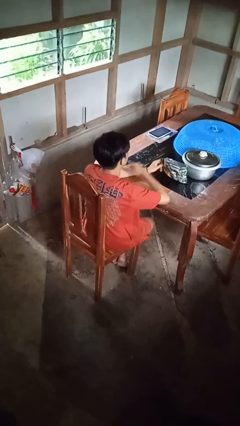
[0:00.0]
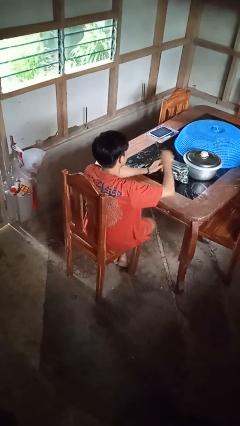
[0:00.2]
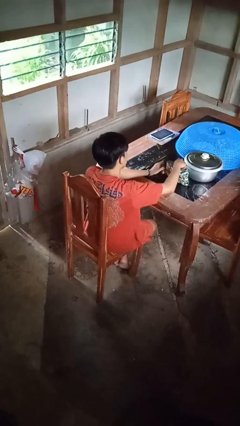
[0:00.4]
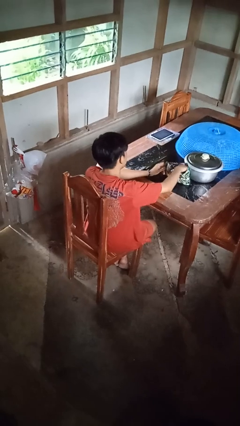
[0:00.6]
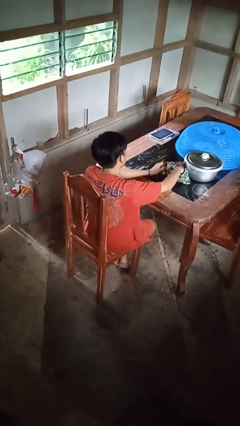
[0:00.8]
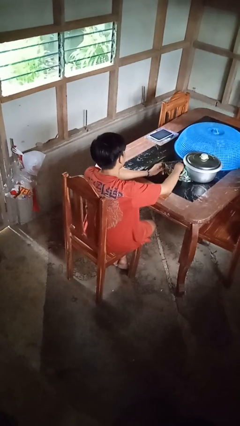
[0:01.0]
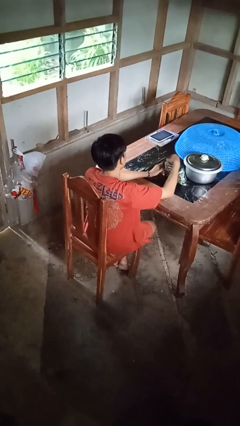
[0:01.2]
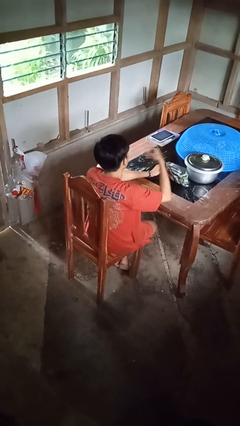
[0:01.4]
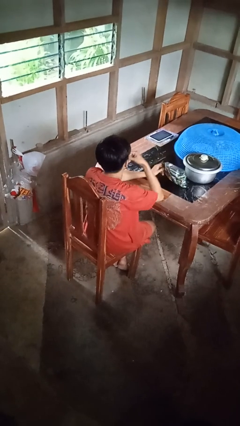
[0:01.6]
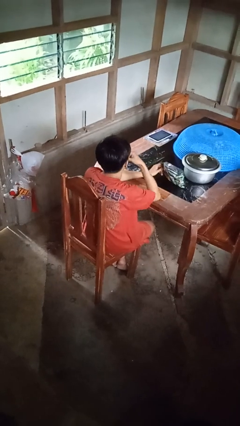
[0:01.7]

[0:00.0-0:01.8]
person eats snack from bag

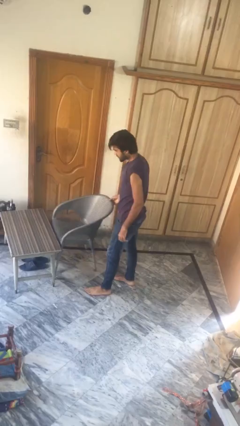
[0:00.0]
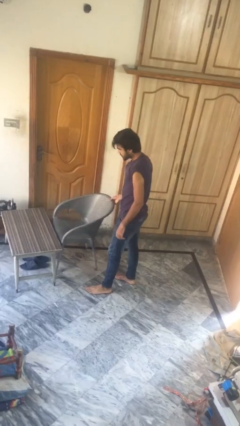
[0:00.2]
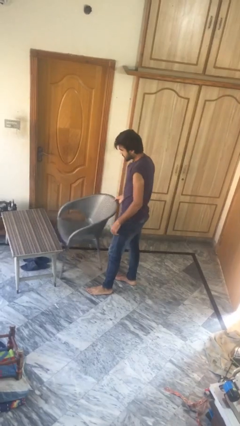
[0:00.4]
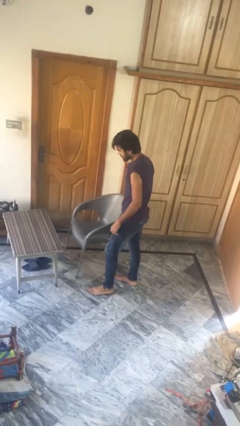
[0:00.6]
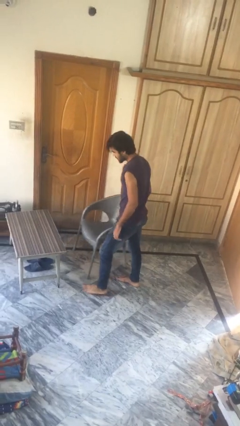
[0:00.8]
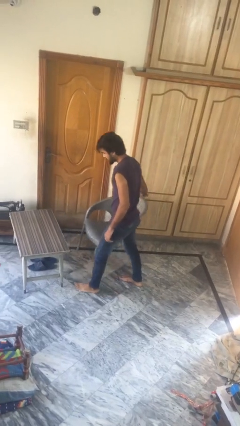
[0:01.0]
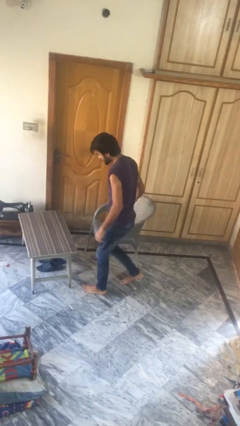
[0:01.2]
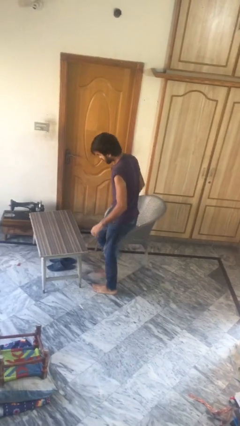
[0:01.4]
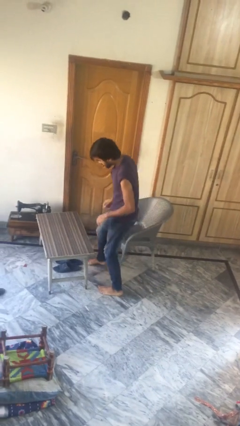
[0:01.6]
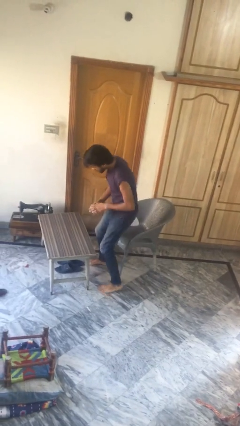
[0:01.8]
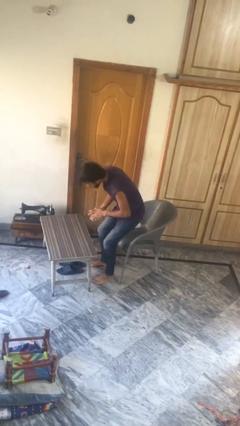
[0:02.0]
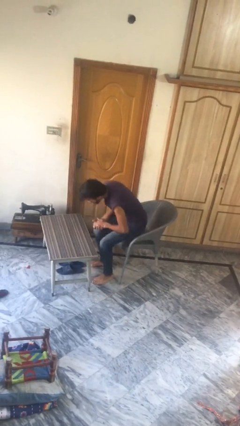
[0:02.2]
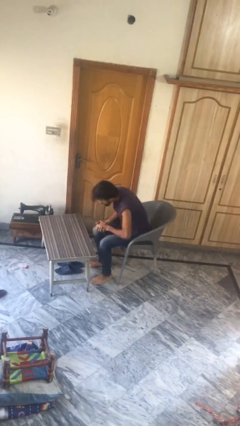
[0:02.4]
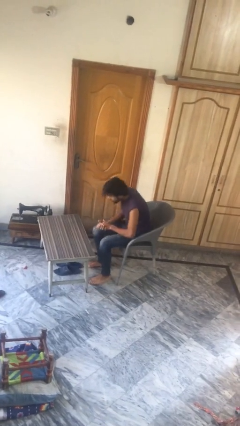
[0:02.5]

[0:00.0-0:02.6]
person sits down

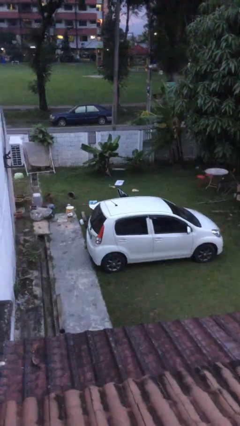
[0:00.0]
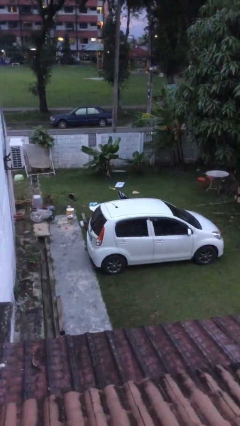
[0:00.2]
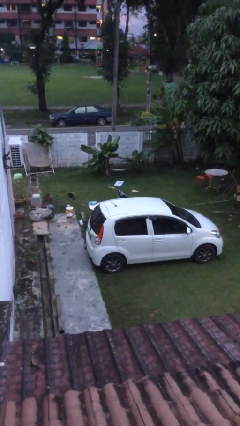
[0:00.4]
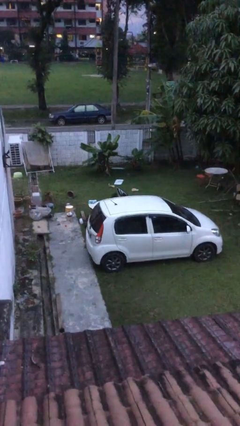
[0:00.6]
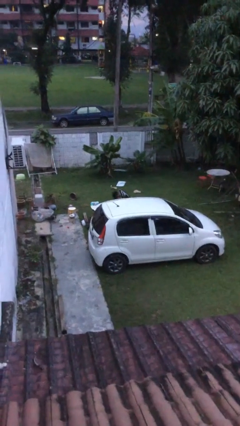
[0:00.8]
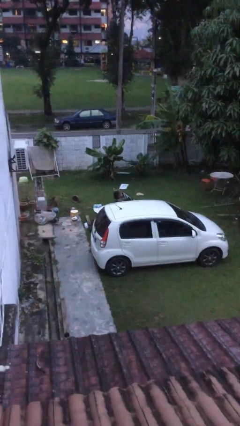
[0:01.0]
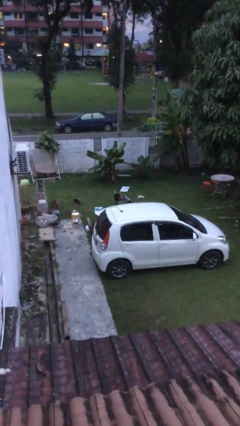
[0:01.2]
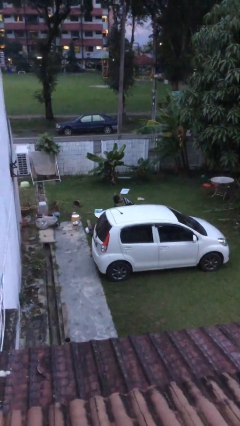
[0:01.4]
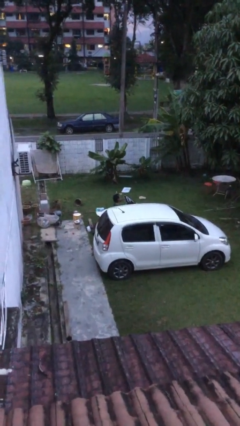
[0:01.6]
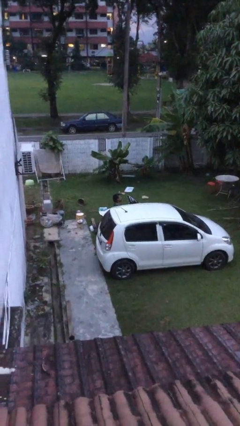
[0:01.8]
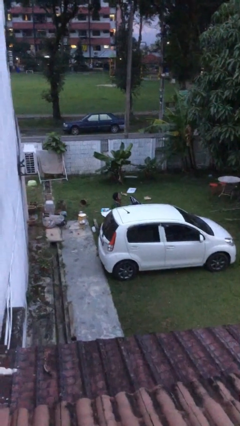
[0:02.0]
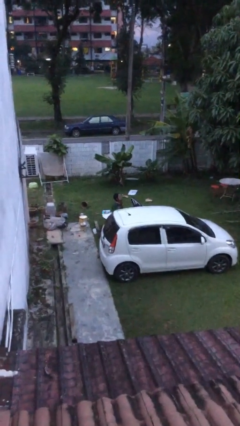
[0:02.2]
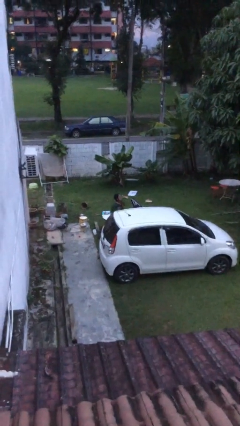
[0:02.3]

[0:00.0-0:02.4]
person exits car

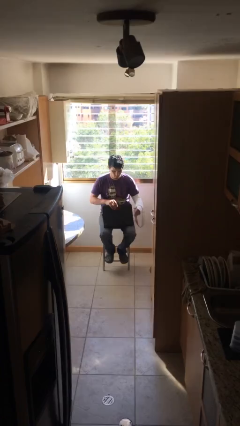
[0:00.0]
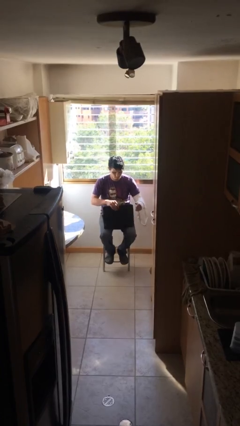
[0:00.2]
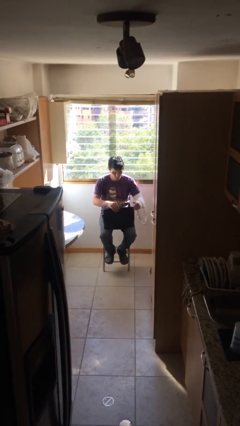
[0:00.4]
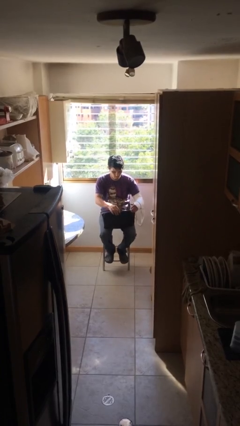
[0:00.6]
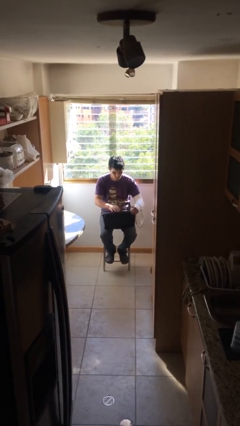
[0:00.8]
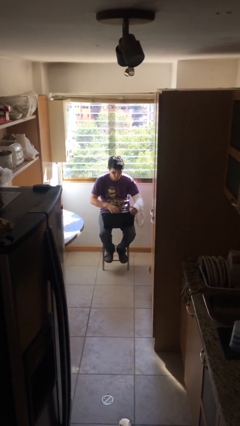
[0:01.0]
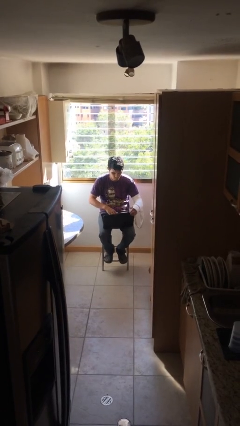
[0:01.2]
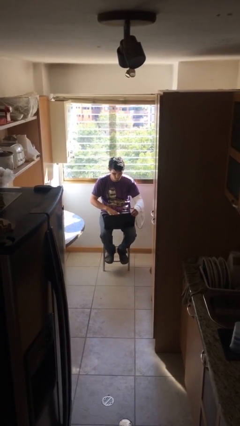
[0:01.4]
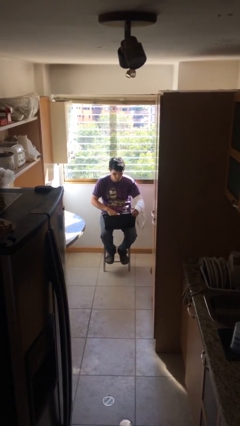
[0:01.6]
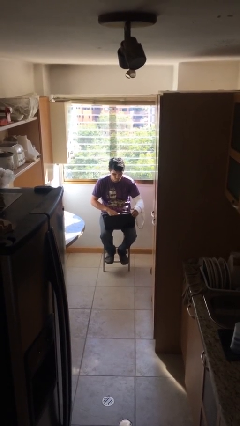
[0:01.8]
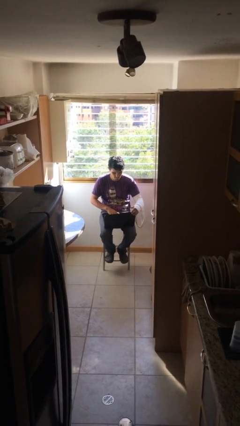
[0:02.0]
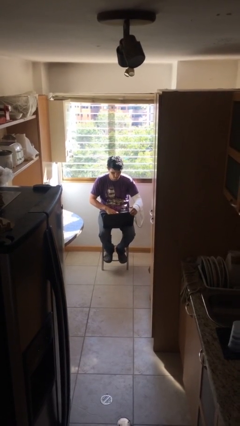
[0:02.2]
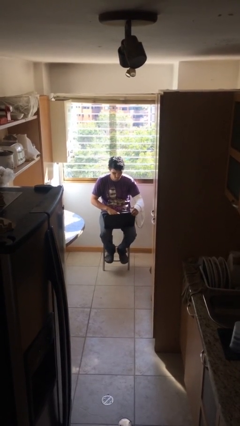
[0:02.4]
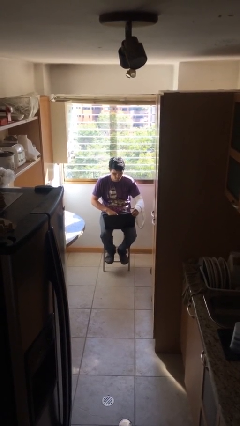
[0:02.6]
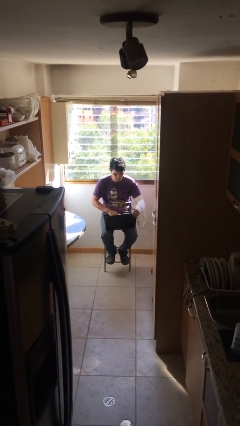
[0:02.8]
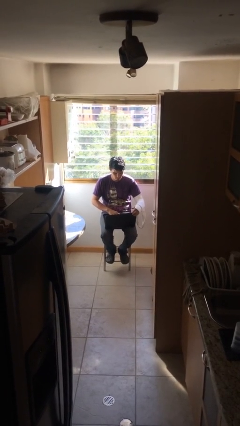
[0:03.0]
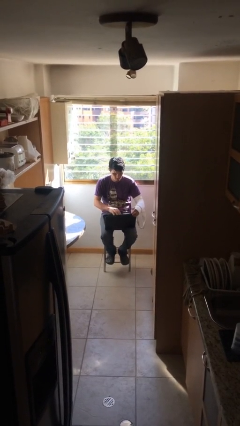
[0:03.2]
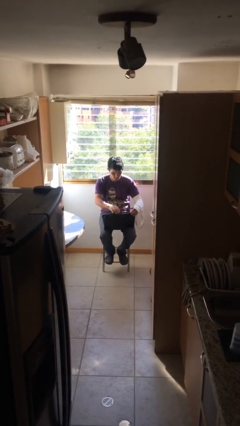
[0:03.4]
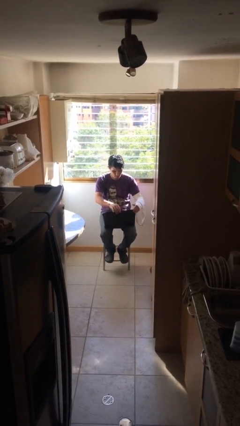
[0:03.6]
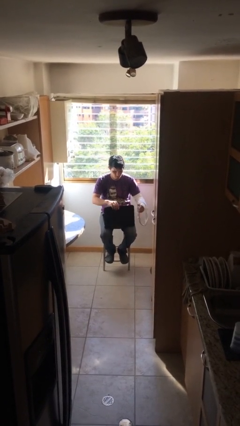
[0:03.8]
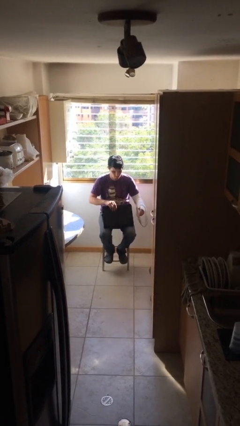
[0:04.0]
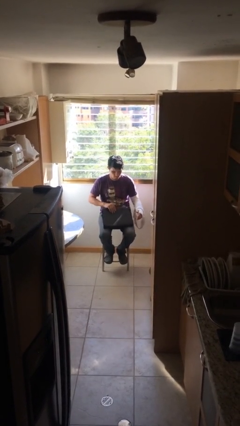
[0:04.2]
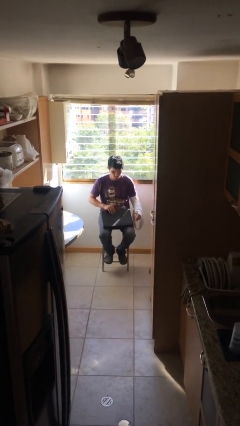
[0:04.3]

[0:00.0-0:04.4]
person interacts with laptop

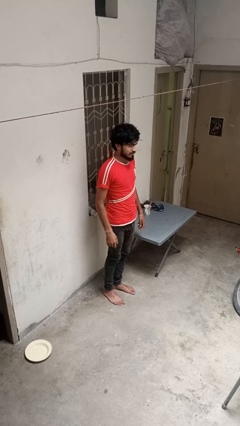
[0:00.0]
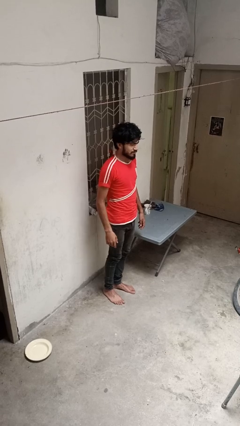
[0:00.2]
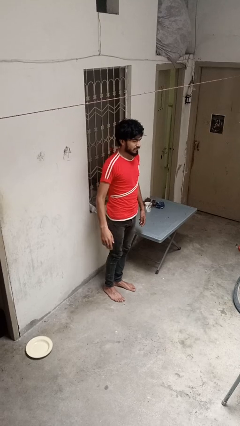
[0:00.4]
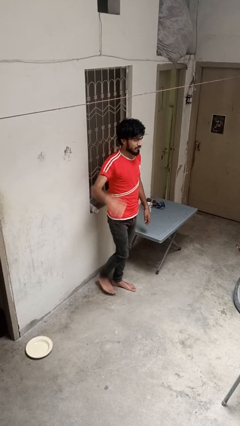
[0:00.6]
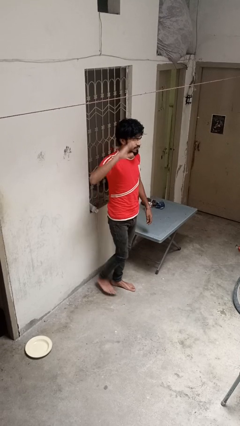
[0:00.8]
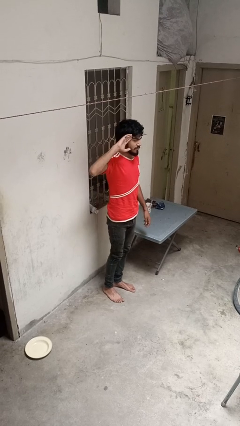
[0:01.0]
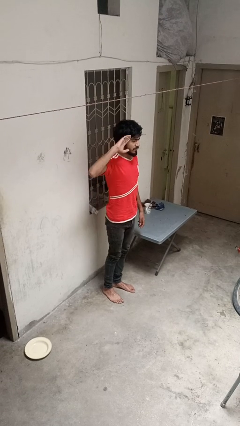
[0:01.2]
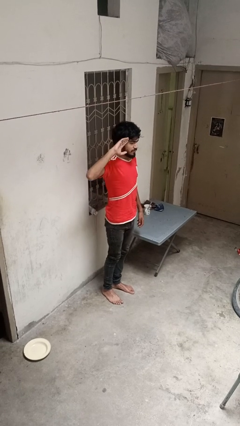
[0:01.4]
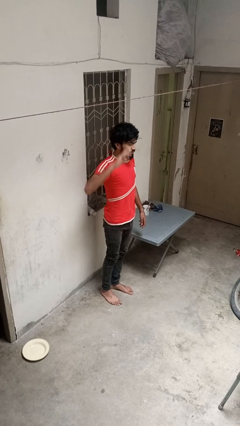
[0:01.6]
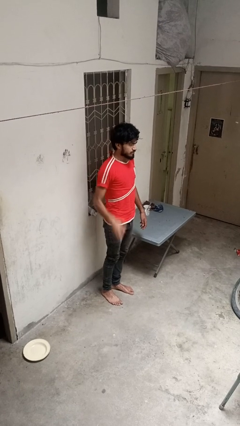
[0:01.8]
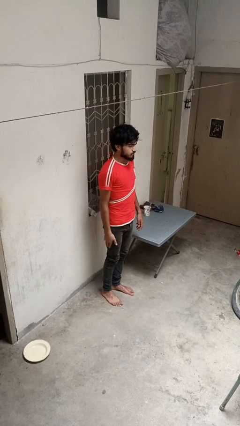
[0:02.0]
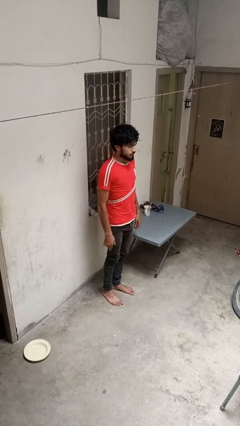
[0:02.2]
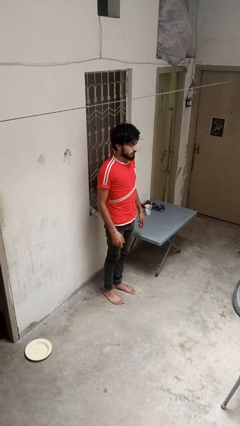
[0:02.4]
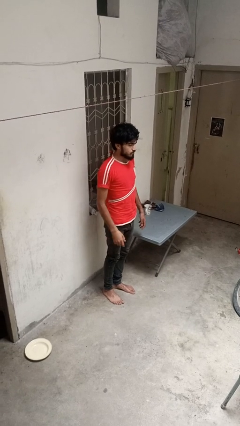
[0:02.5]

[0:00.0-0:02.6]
person salutes

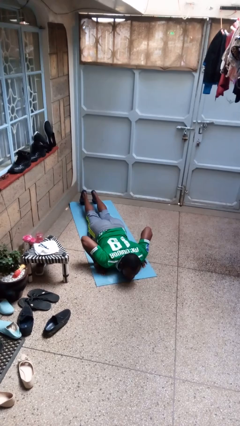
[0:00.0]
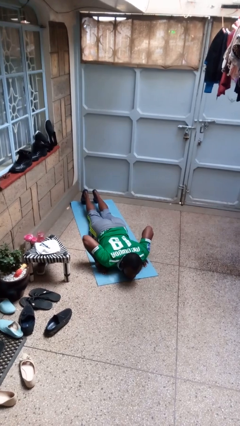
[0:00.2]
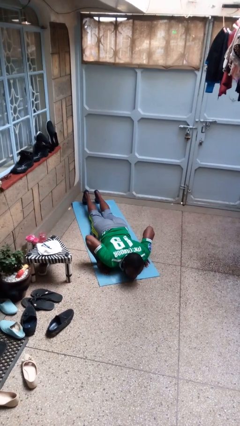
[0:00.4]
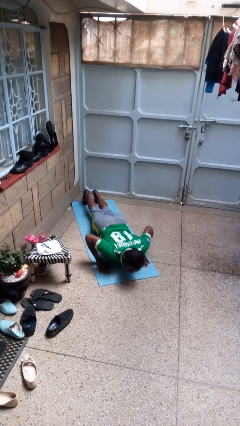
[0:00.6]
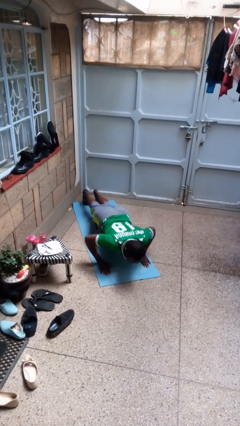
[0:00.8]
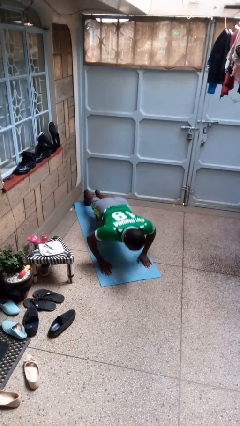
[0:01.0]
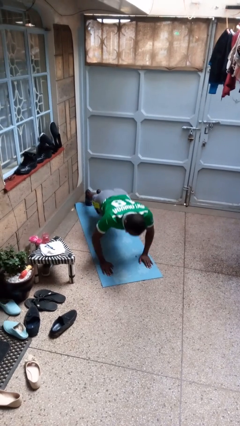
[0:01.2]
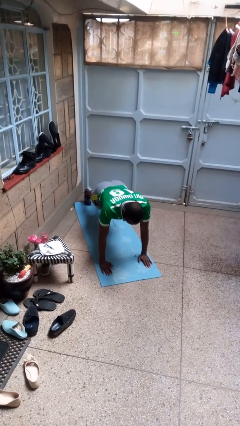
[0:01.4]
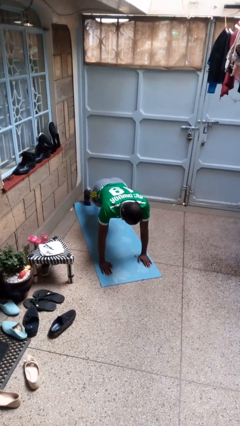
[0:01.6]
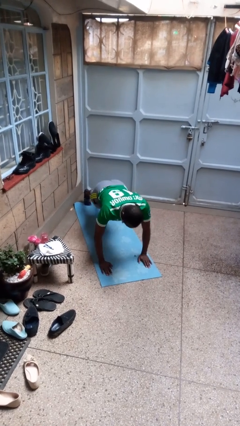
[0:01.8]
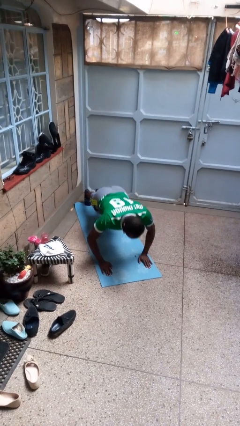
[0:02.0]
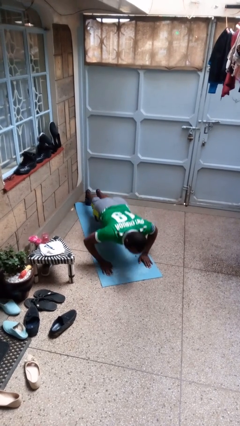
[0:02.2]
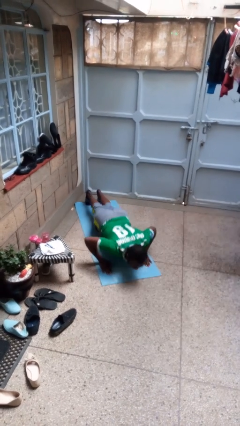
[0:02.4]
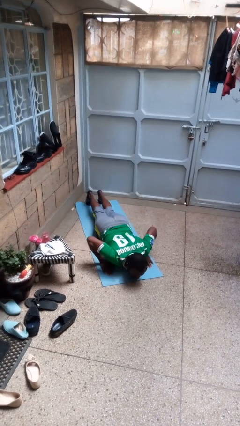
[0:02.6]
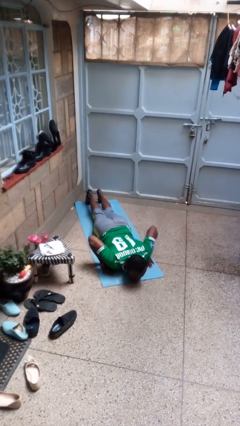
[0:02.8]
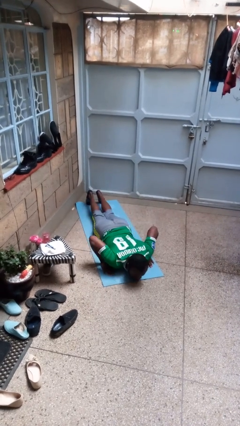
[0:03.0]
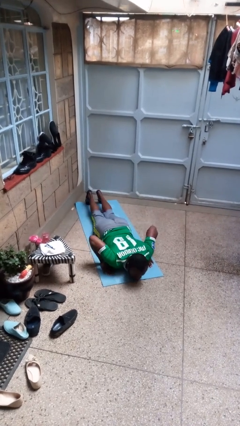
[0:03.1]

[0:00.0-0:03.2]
person exercises with pushup

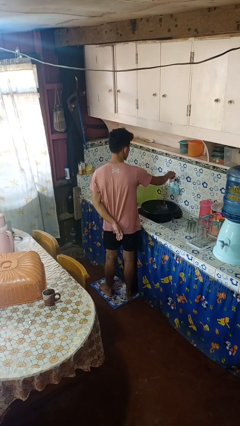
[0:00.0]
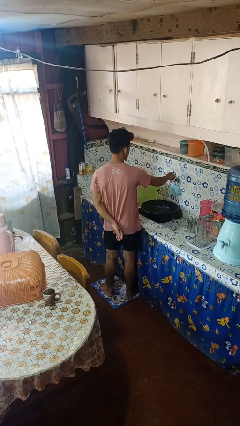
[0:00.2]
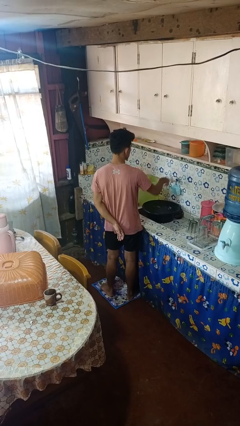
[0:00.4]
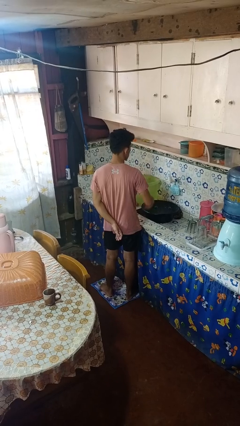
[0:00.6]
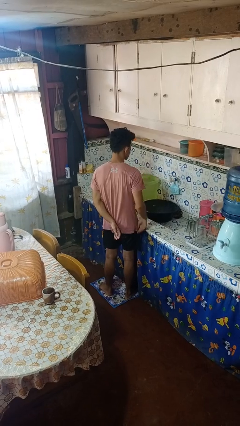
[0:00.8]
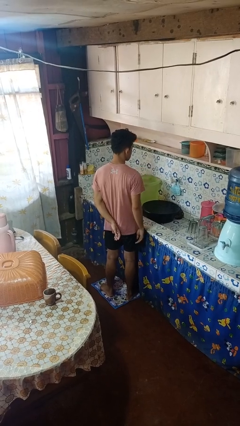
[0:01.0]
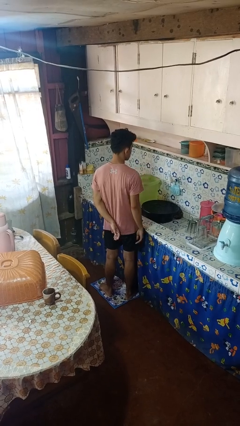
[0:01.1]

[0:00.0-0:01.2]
person turns off faucet
